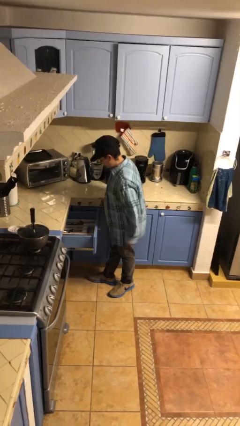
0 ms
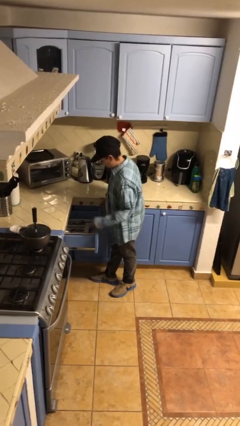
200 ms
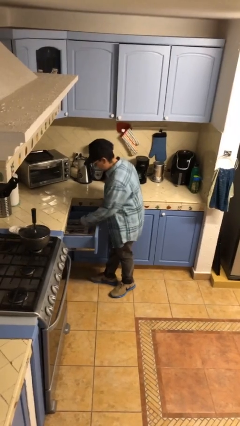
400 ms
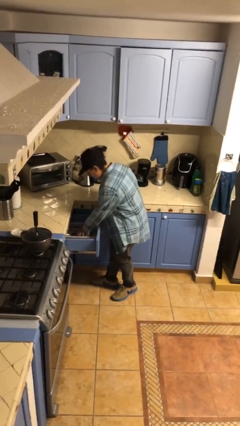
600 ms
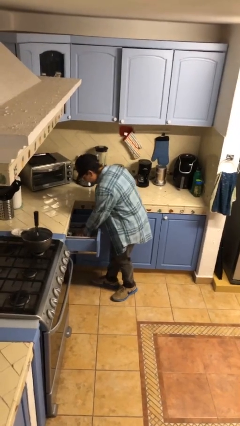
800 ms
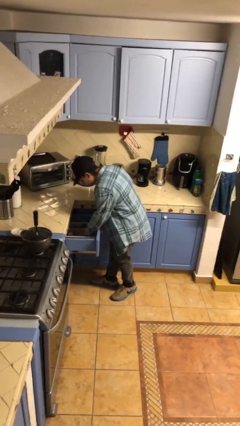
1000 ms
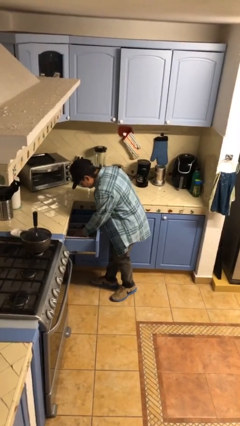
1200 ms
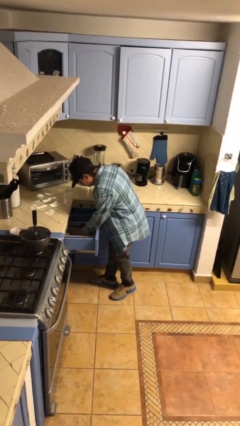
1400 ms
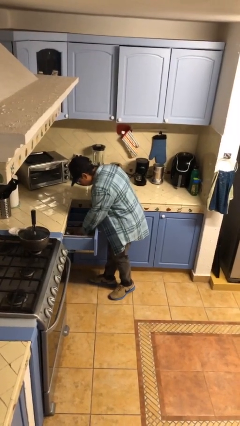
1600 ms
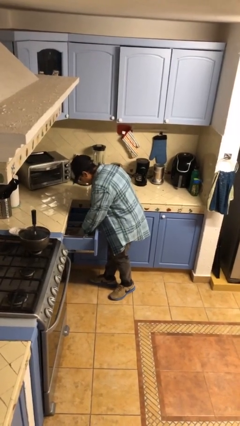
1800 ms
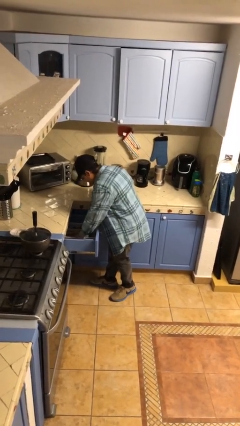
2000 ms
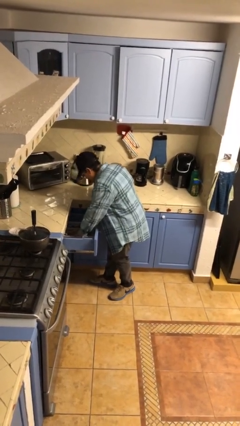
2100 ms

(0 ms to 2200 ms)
person searches in kitchen drawer

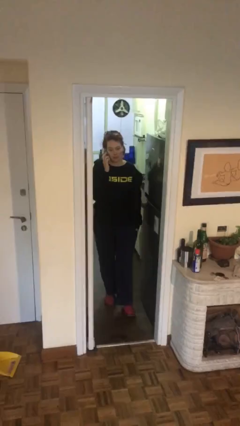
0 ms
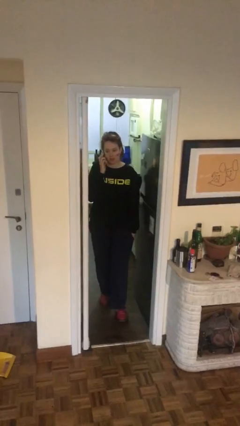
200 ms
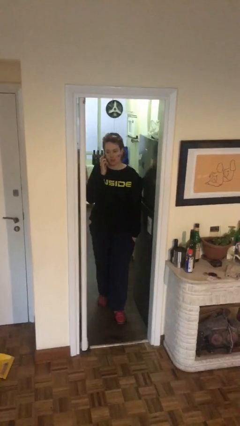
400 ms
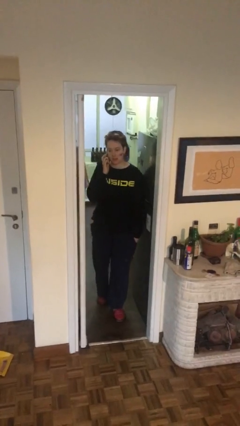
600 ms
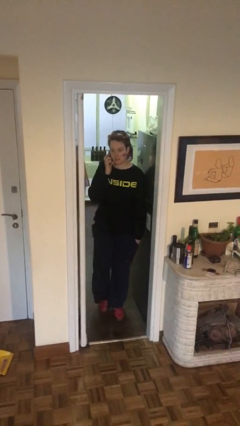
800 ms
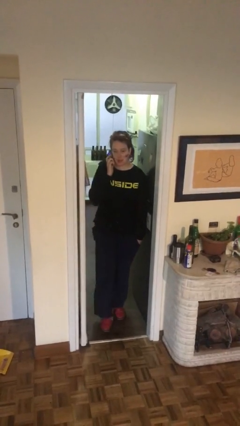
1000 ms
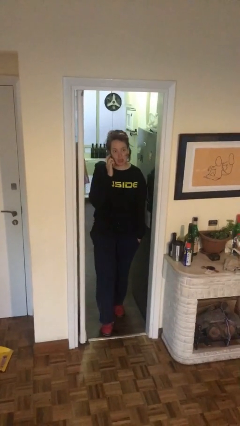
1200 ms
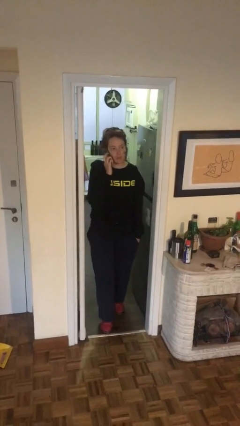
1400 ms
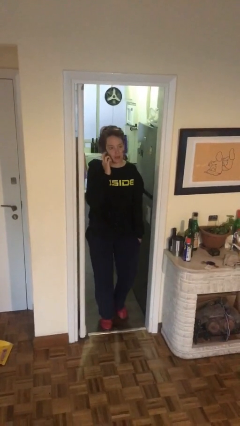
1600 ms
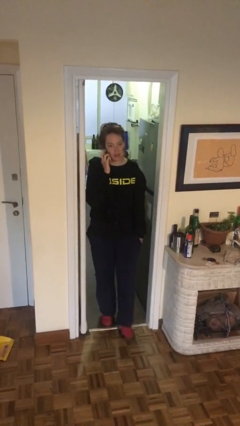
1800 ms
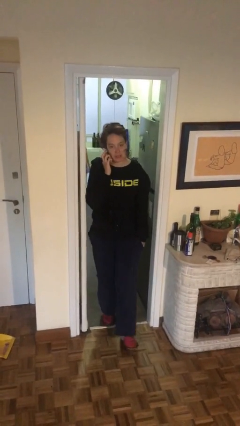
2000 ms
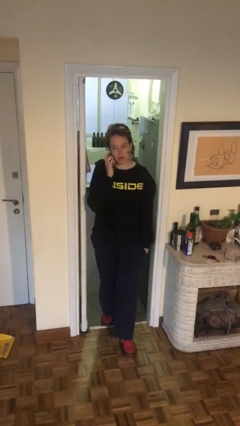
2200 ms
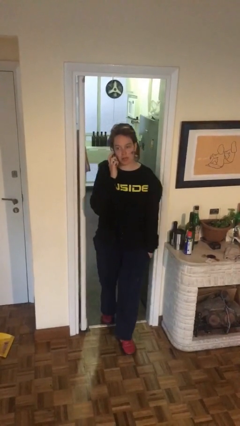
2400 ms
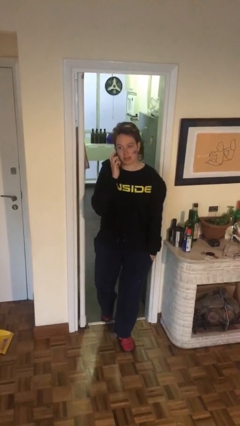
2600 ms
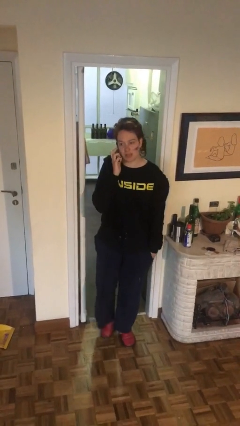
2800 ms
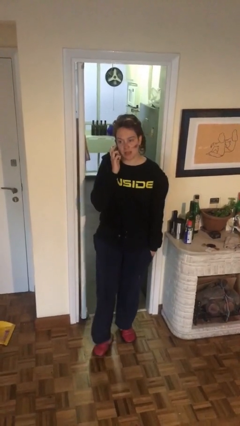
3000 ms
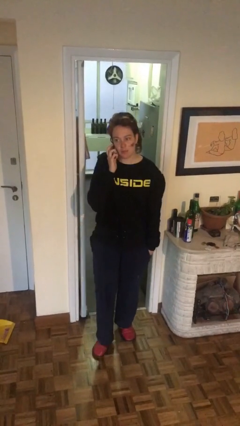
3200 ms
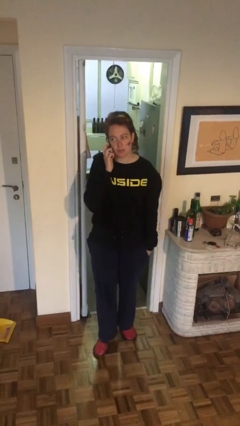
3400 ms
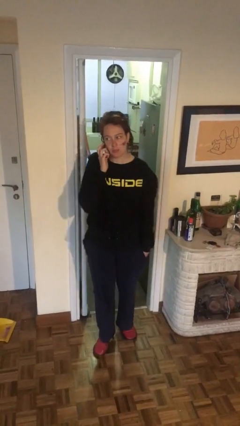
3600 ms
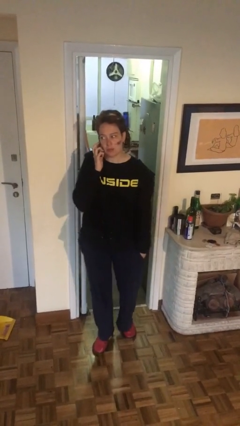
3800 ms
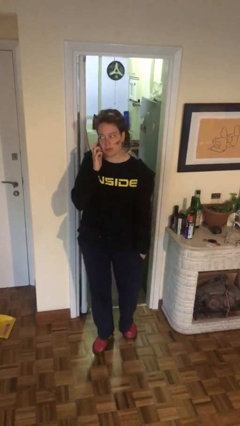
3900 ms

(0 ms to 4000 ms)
person enters scene through structure

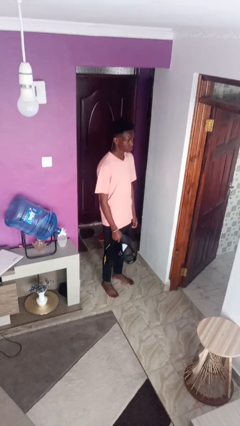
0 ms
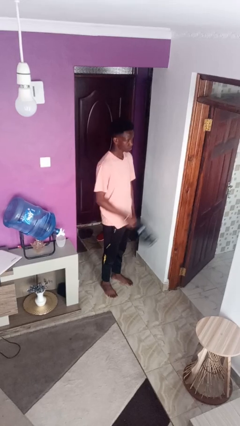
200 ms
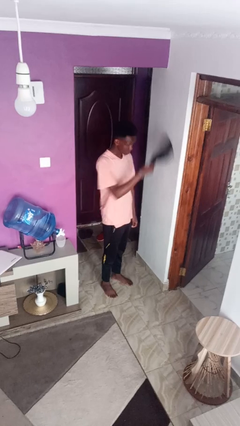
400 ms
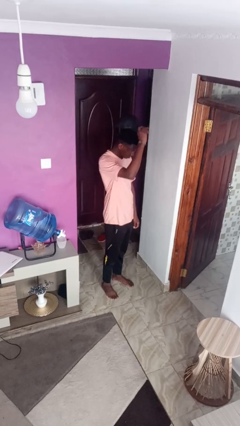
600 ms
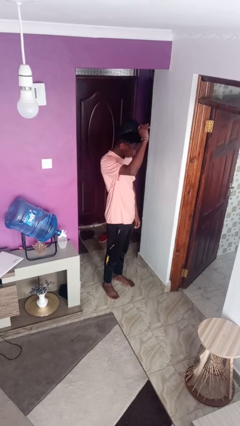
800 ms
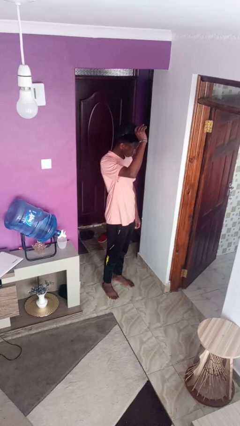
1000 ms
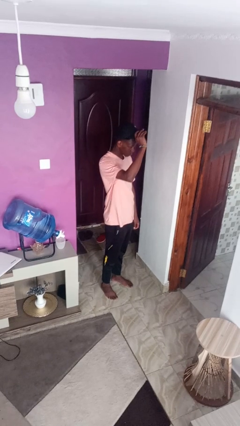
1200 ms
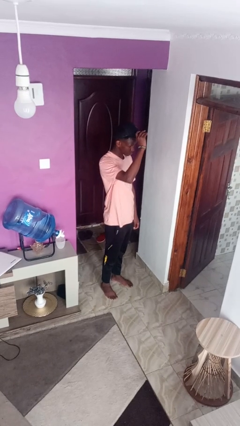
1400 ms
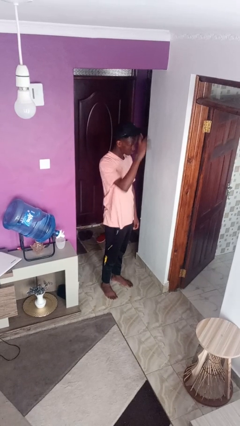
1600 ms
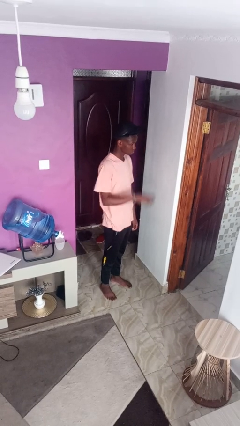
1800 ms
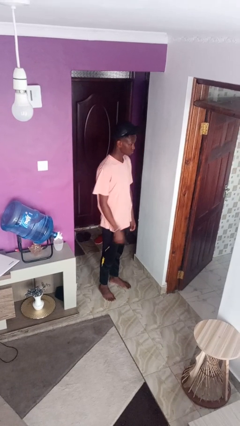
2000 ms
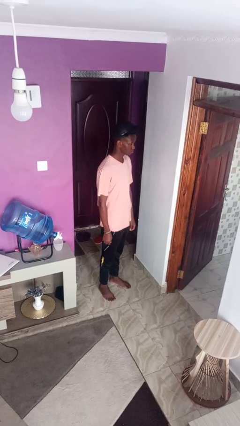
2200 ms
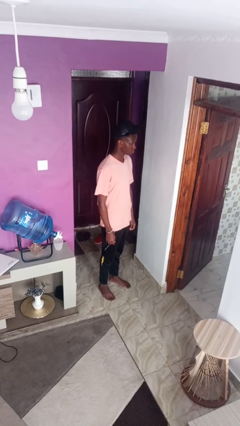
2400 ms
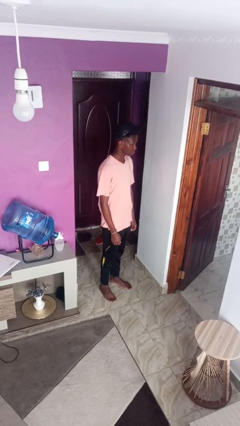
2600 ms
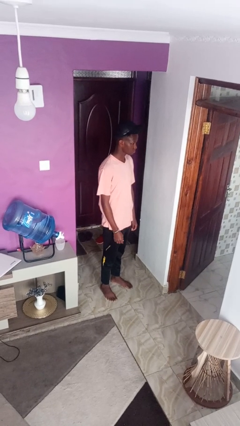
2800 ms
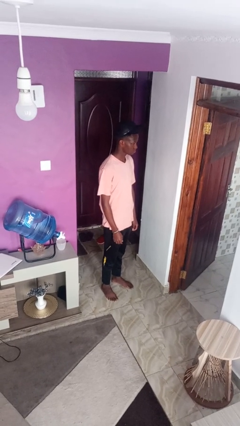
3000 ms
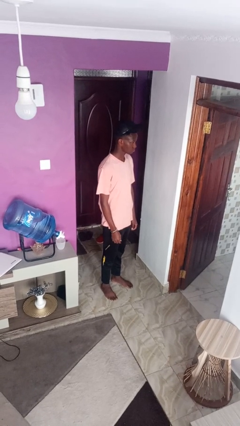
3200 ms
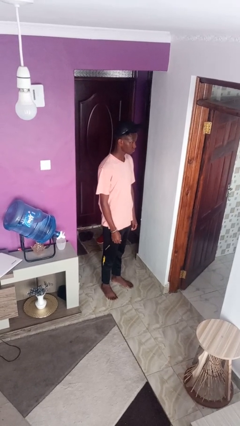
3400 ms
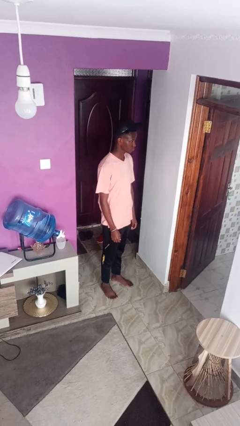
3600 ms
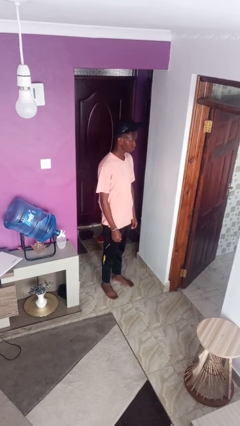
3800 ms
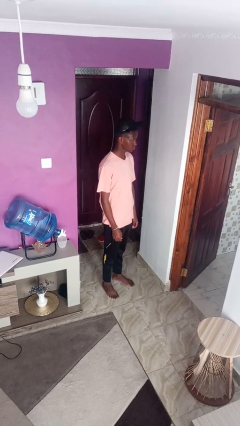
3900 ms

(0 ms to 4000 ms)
person puts on hat

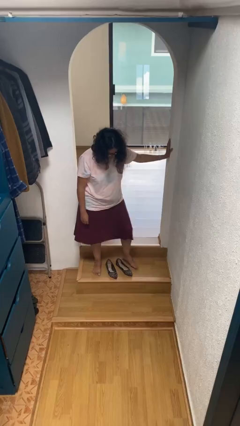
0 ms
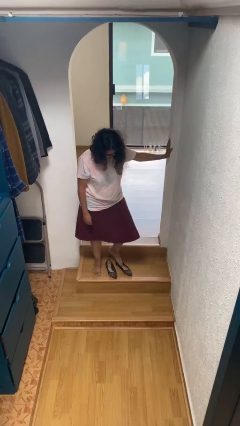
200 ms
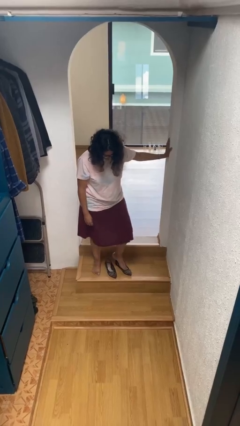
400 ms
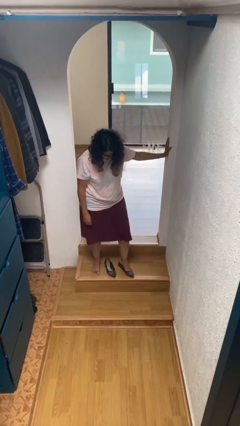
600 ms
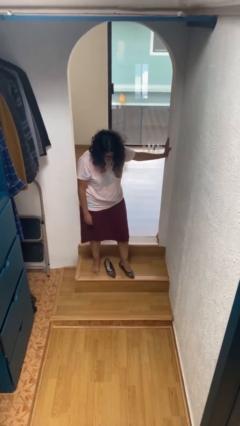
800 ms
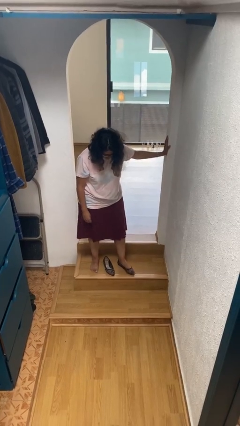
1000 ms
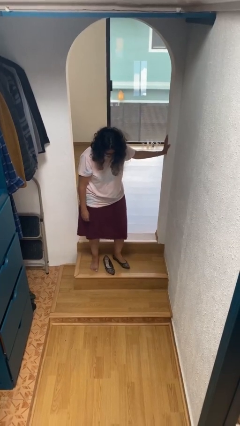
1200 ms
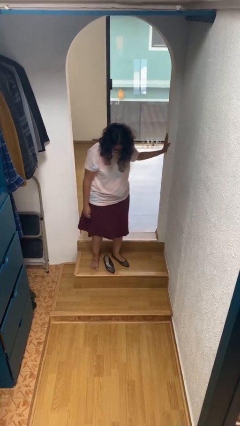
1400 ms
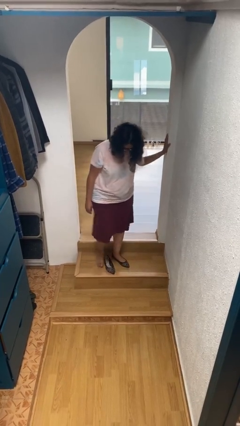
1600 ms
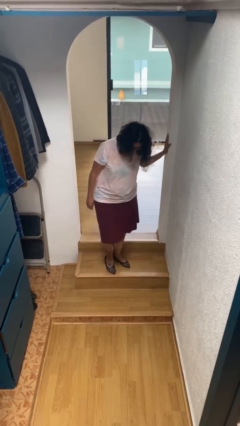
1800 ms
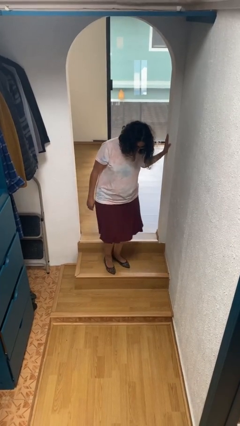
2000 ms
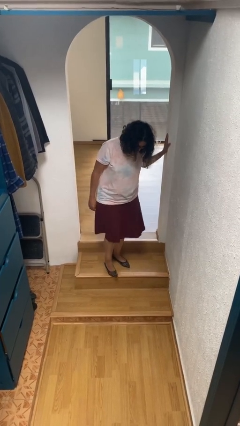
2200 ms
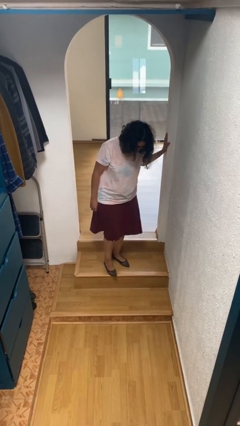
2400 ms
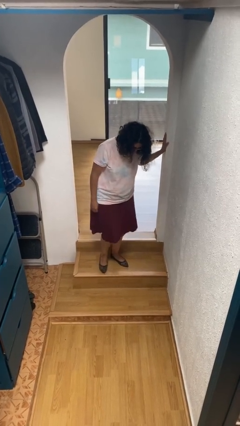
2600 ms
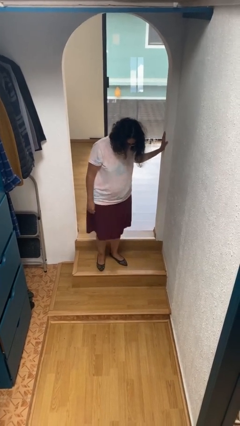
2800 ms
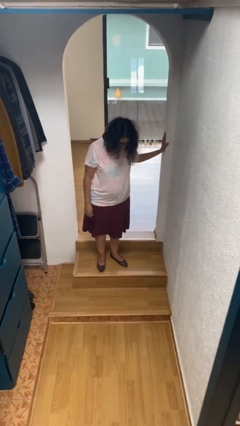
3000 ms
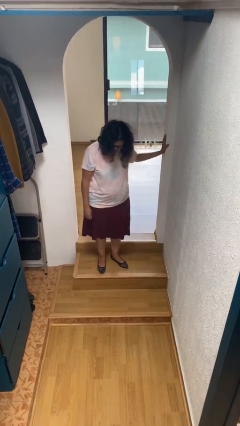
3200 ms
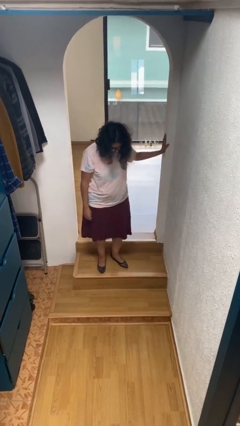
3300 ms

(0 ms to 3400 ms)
person puts on shoes

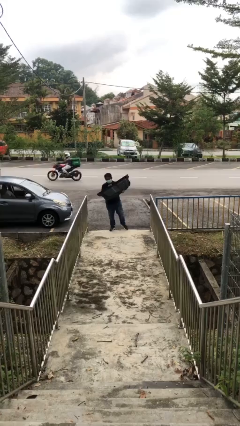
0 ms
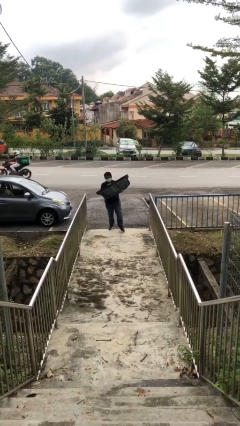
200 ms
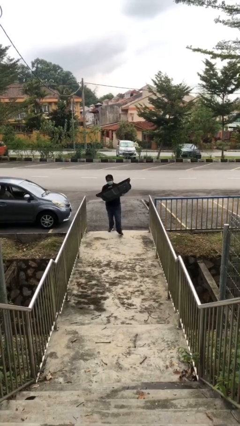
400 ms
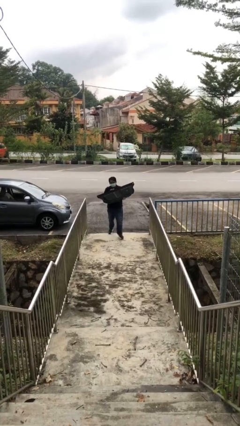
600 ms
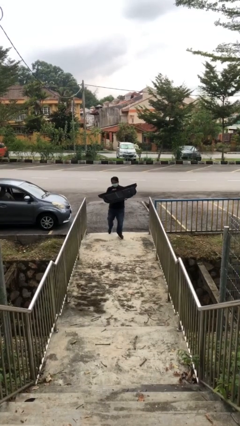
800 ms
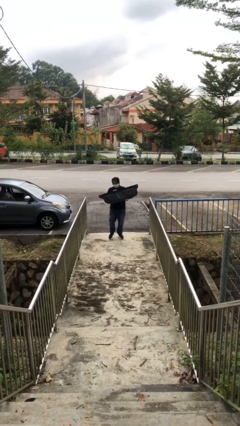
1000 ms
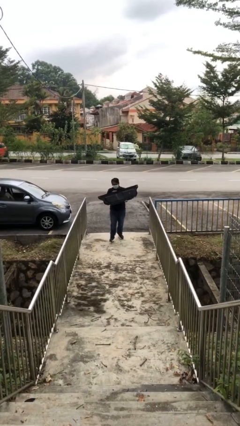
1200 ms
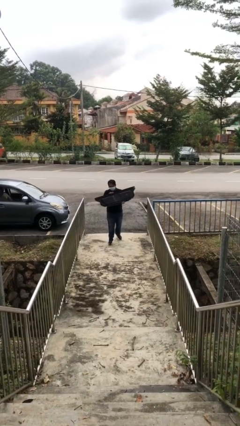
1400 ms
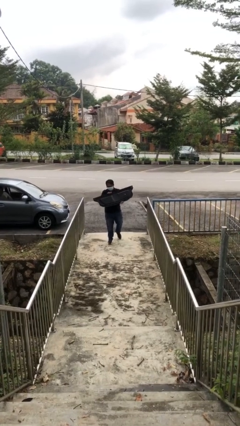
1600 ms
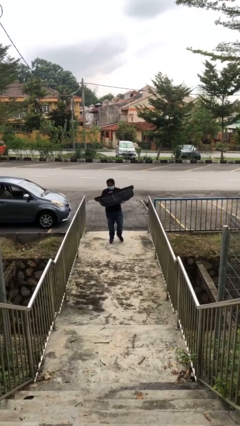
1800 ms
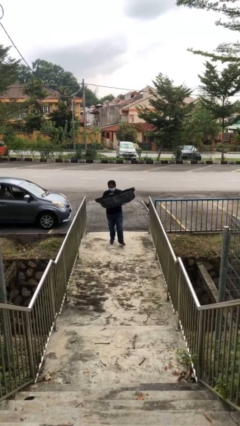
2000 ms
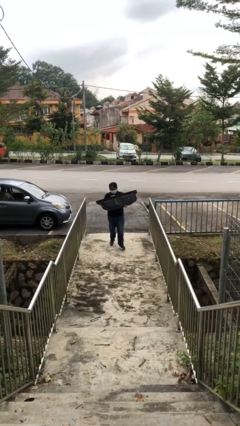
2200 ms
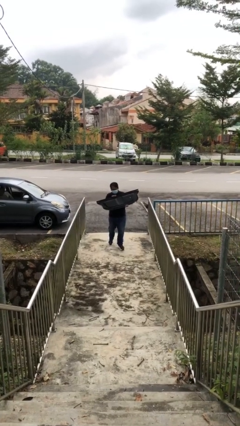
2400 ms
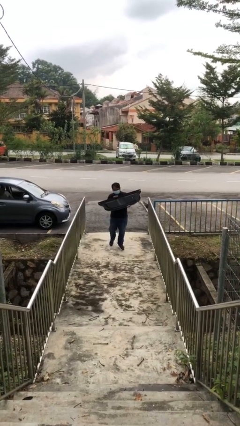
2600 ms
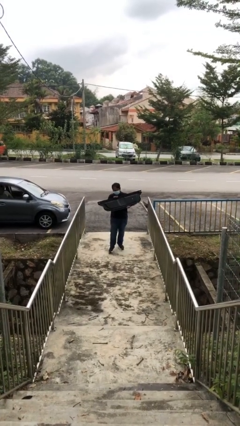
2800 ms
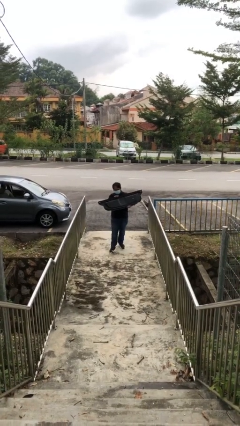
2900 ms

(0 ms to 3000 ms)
person carries heavy object

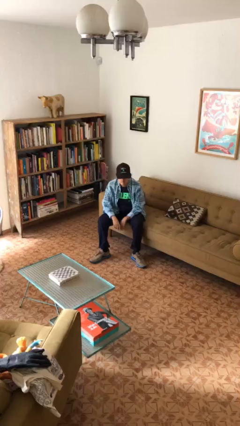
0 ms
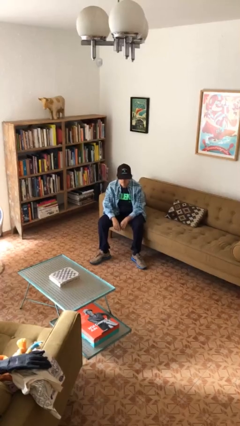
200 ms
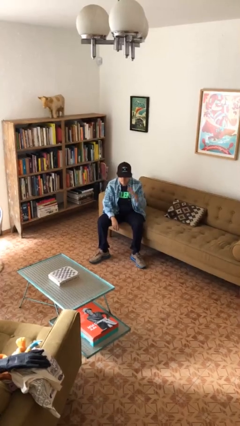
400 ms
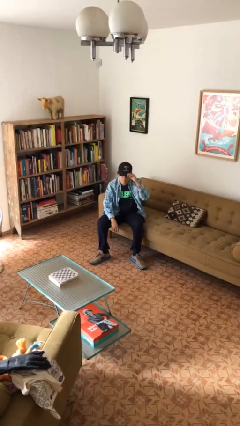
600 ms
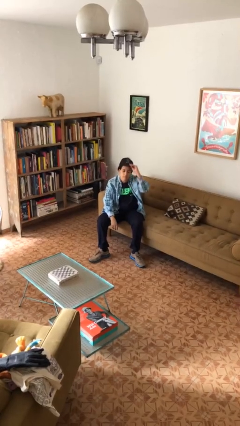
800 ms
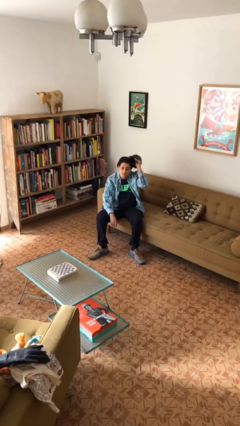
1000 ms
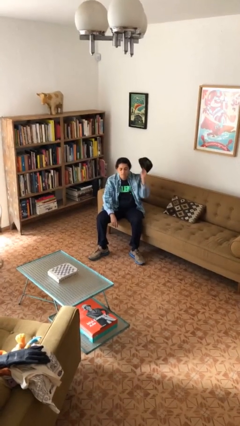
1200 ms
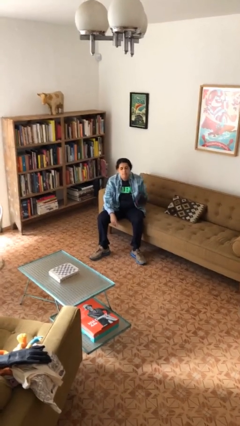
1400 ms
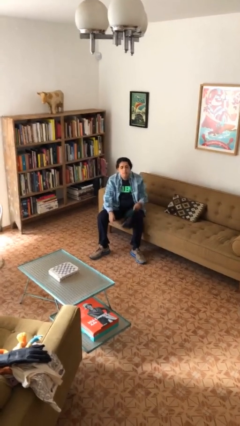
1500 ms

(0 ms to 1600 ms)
person takes off hat
